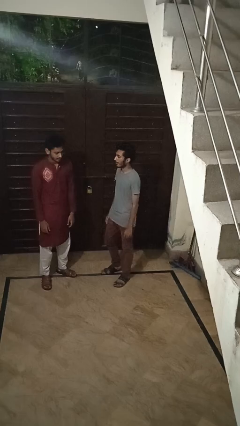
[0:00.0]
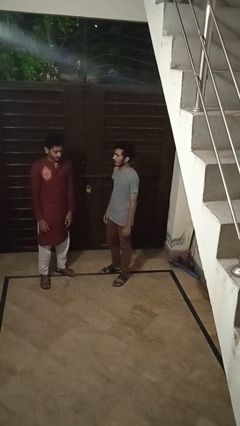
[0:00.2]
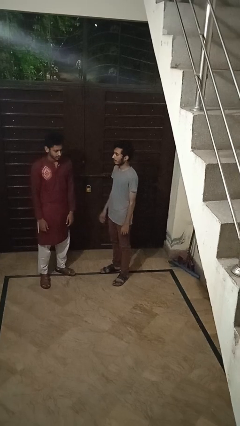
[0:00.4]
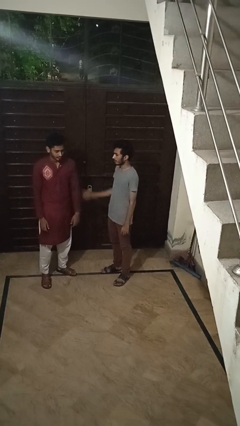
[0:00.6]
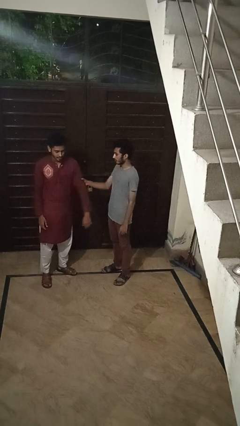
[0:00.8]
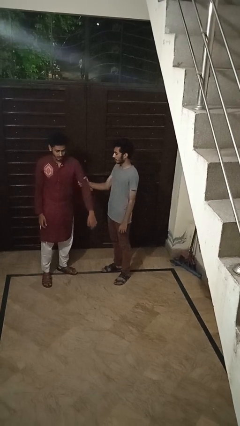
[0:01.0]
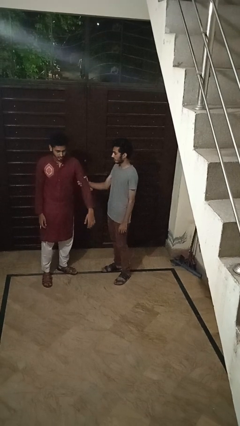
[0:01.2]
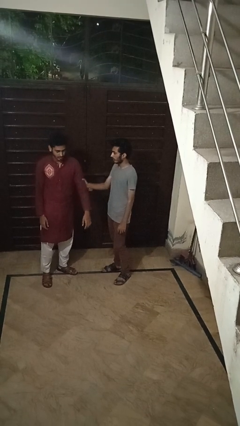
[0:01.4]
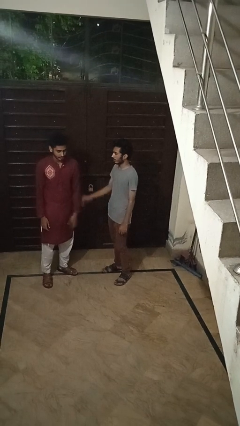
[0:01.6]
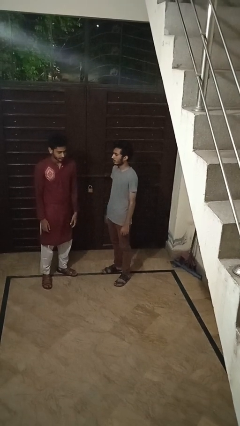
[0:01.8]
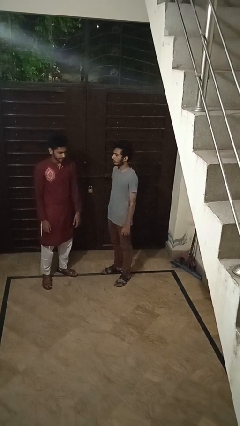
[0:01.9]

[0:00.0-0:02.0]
person grabs person by bicep

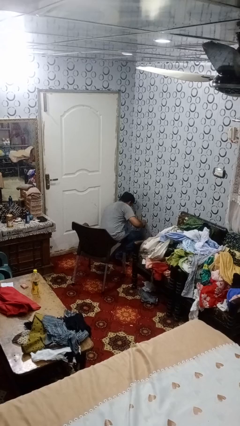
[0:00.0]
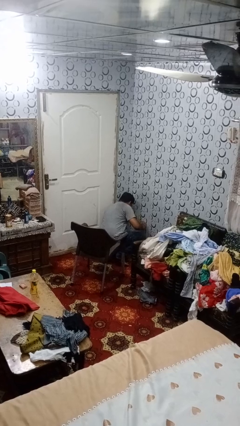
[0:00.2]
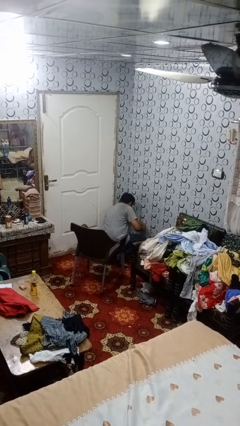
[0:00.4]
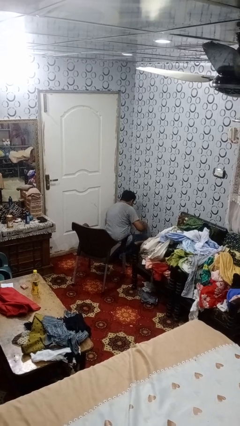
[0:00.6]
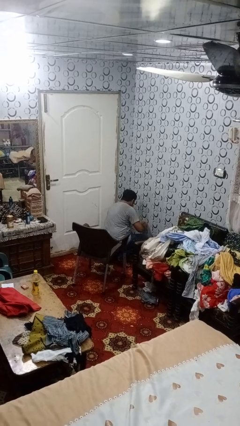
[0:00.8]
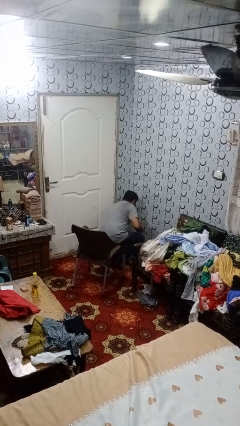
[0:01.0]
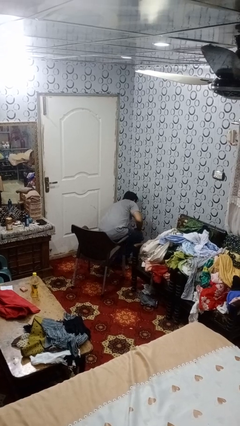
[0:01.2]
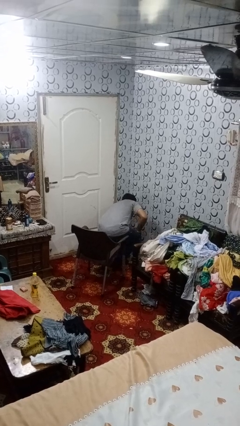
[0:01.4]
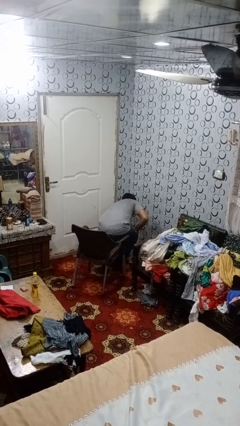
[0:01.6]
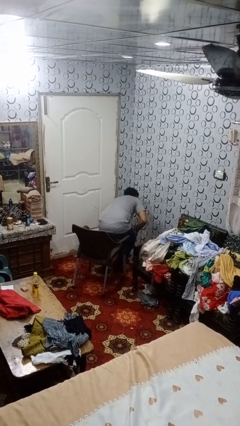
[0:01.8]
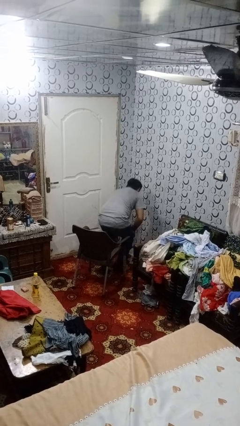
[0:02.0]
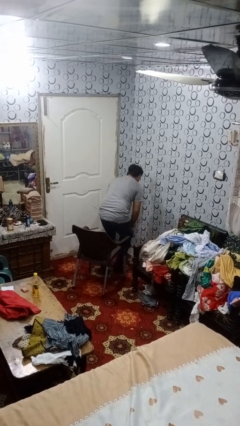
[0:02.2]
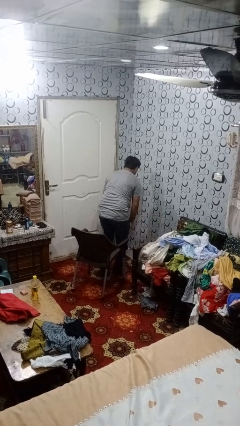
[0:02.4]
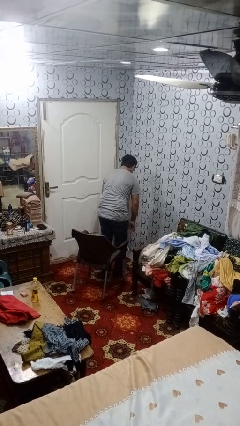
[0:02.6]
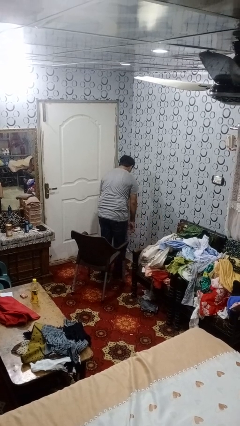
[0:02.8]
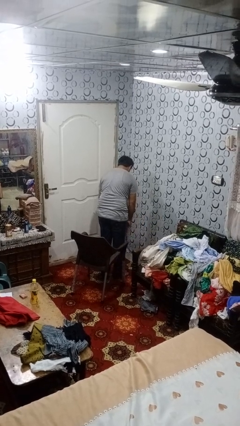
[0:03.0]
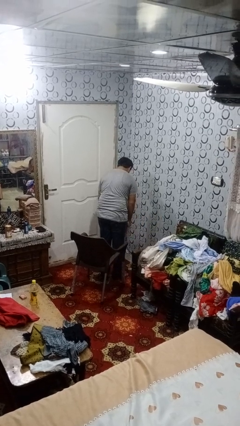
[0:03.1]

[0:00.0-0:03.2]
person stands up from floor

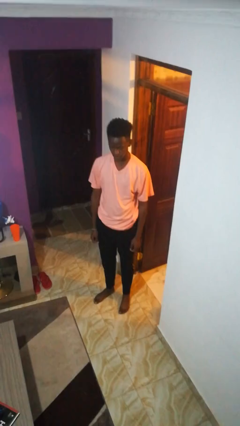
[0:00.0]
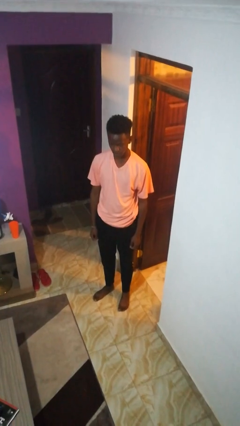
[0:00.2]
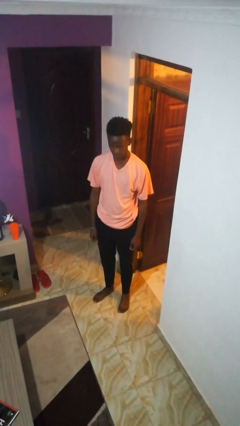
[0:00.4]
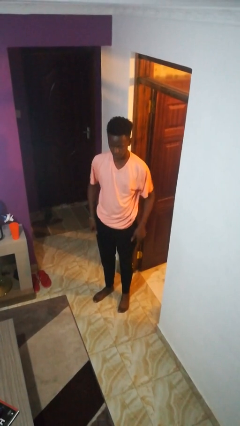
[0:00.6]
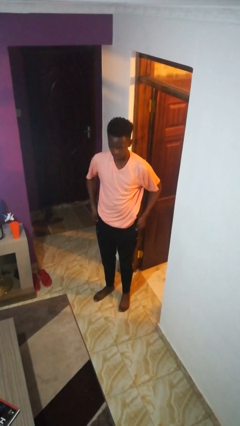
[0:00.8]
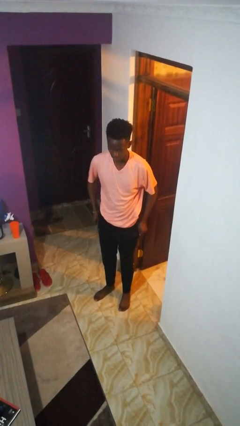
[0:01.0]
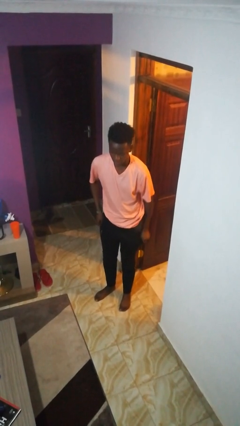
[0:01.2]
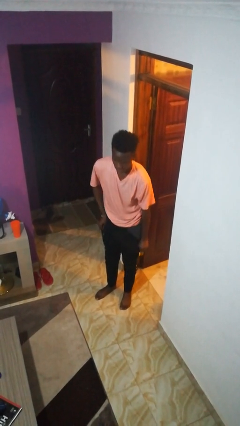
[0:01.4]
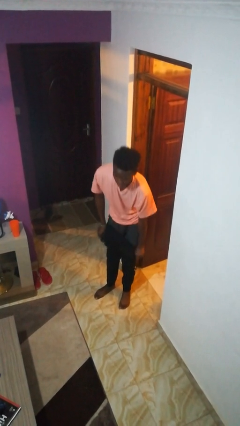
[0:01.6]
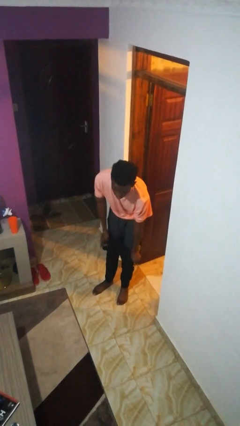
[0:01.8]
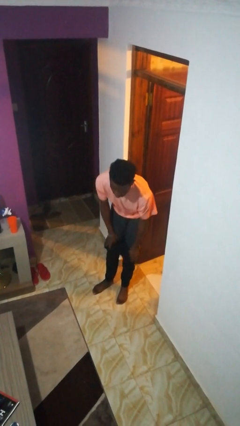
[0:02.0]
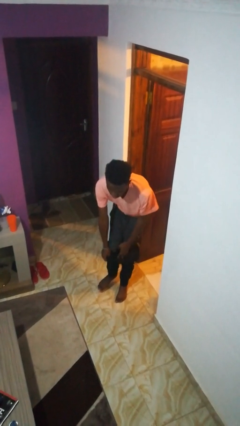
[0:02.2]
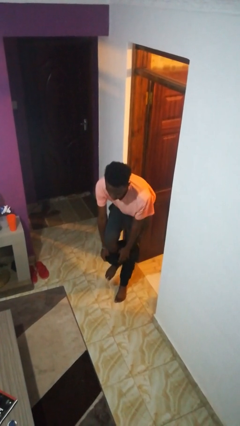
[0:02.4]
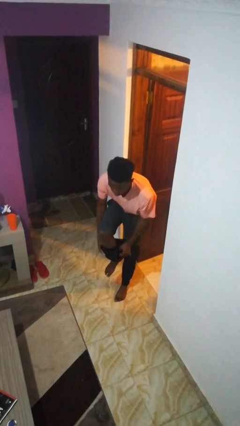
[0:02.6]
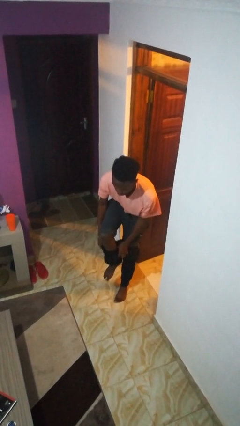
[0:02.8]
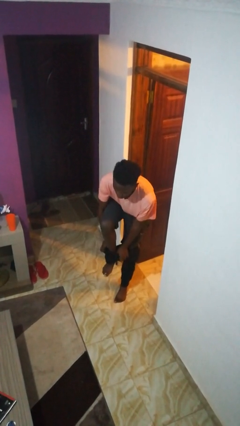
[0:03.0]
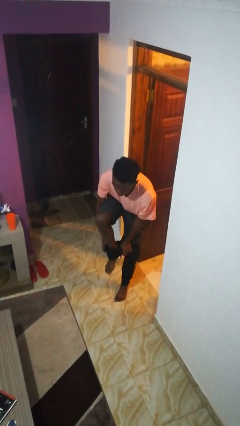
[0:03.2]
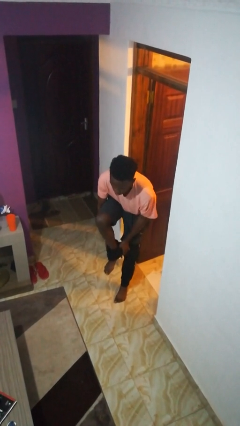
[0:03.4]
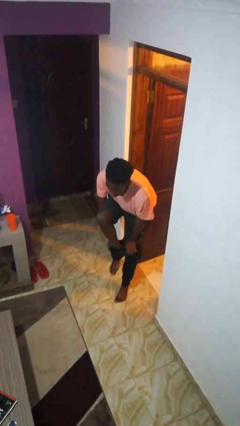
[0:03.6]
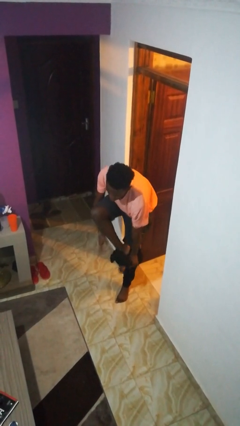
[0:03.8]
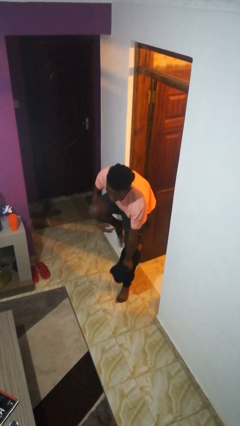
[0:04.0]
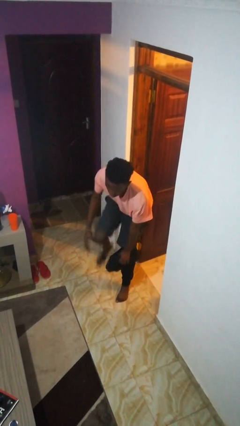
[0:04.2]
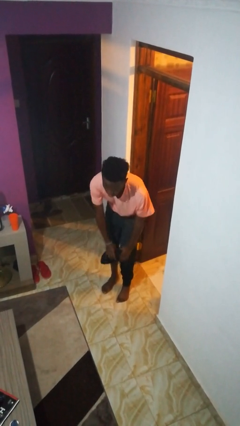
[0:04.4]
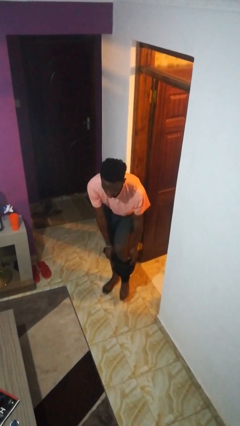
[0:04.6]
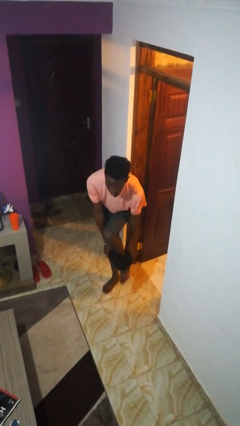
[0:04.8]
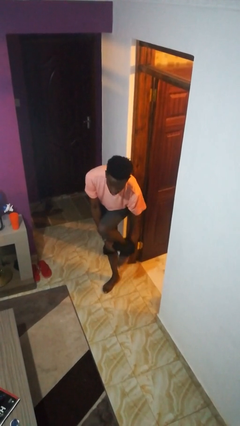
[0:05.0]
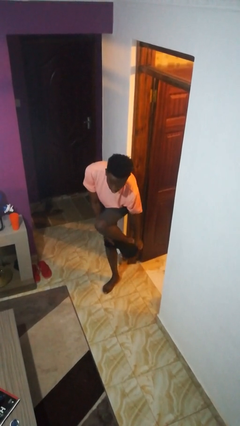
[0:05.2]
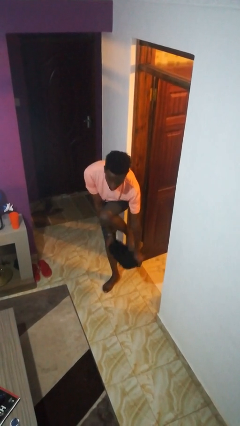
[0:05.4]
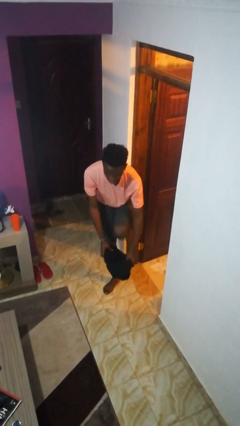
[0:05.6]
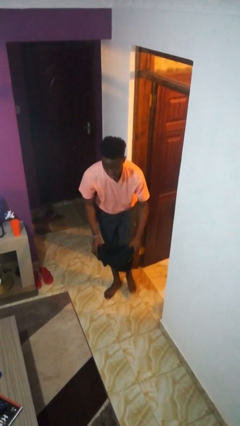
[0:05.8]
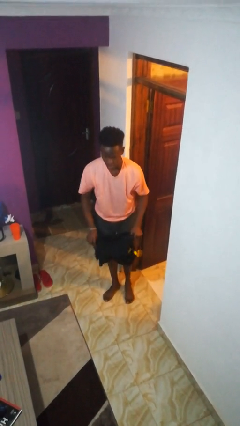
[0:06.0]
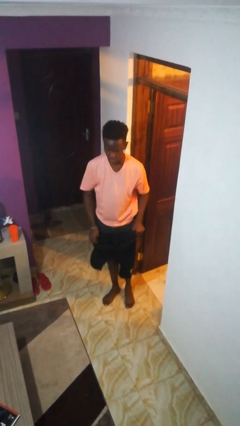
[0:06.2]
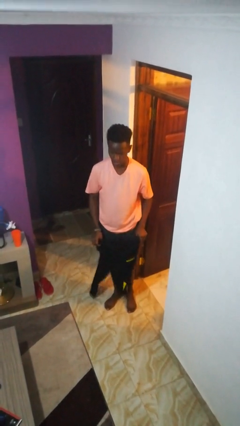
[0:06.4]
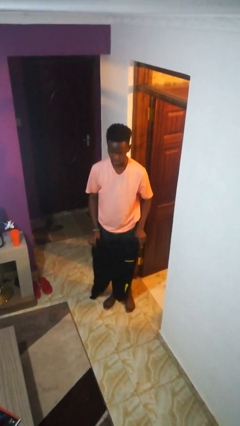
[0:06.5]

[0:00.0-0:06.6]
person takes off pants

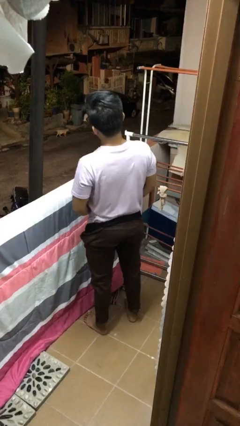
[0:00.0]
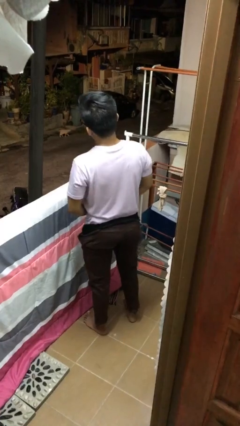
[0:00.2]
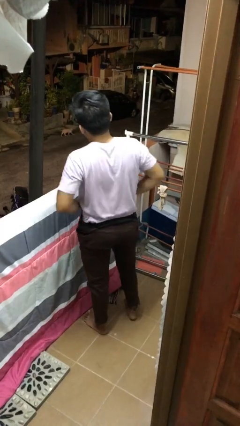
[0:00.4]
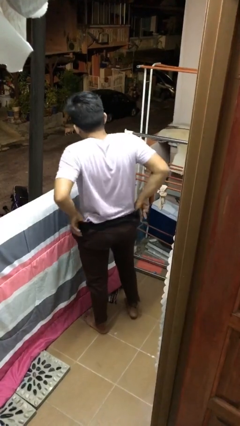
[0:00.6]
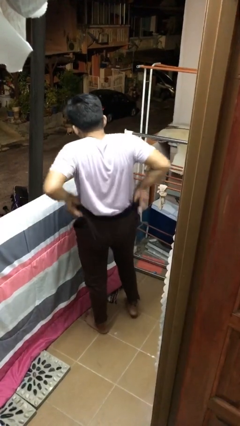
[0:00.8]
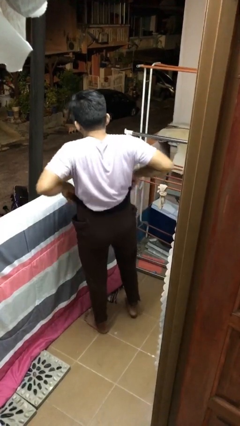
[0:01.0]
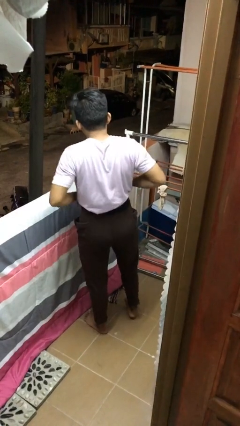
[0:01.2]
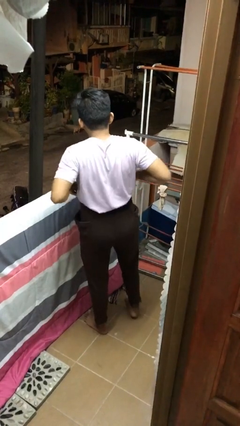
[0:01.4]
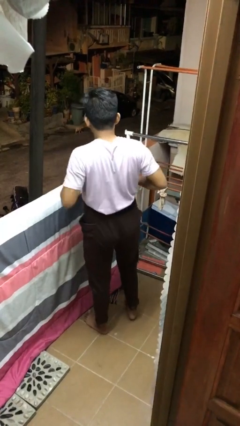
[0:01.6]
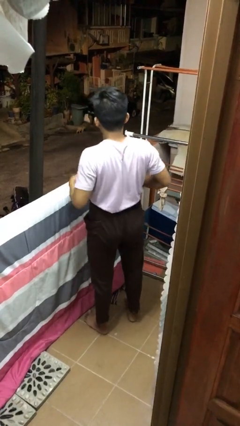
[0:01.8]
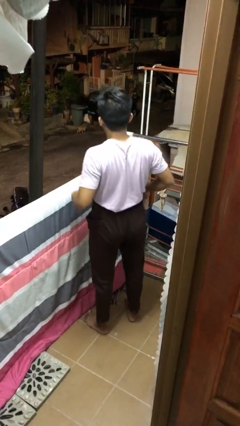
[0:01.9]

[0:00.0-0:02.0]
person hikes up pants

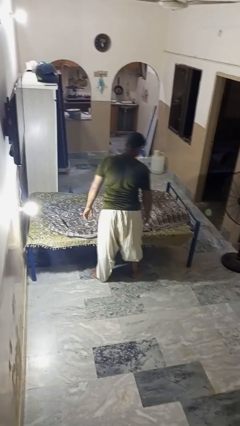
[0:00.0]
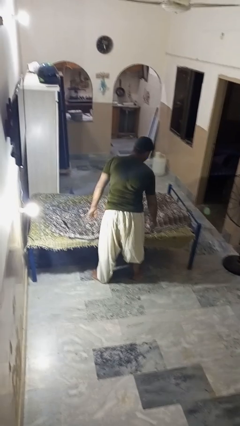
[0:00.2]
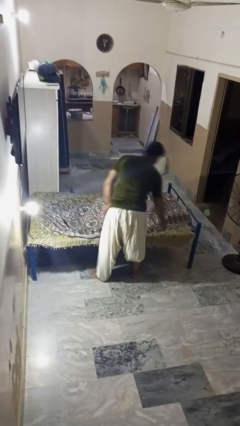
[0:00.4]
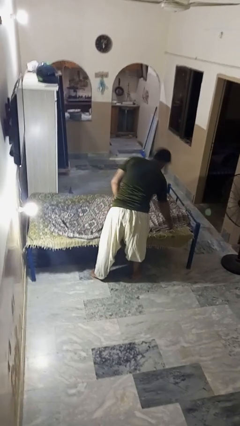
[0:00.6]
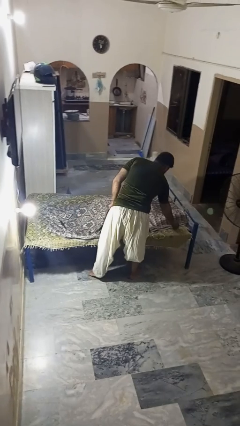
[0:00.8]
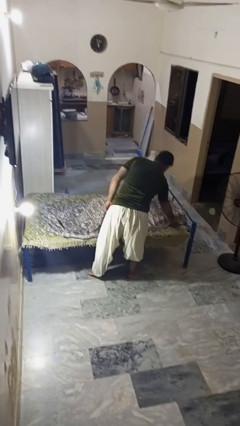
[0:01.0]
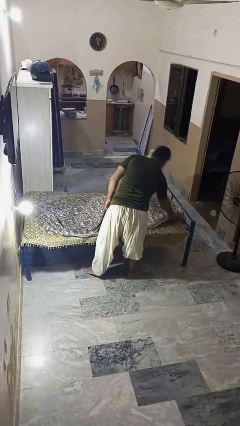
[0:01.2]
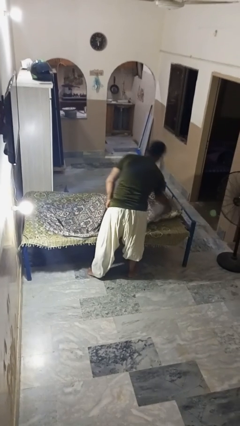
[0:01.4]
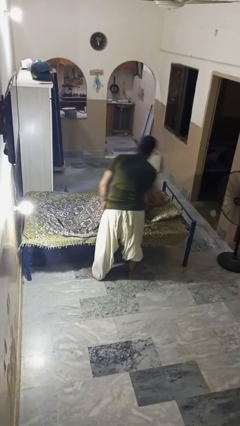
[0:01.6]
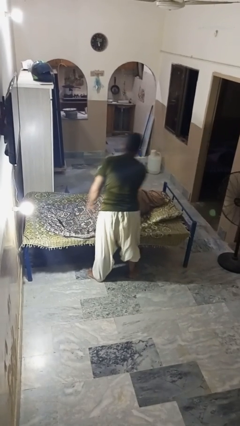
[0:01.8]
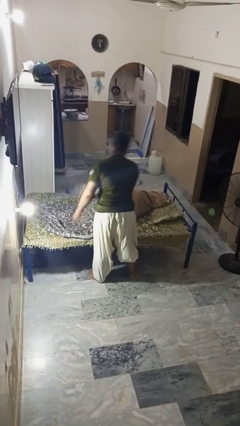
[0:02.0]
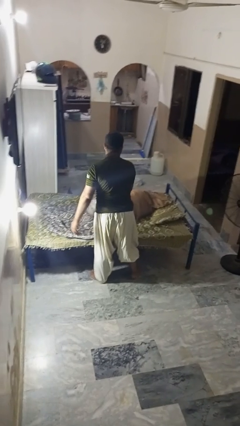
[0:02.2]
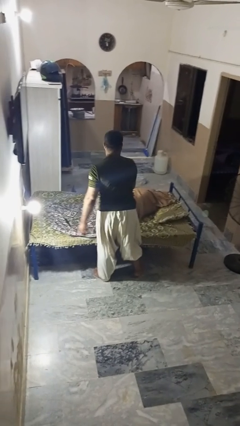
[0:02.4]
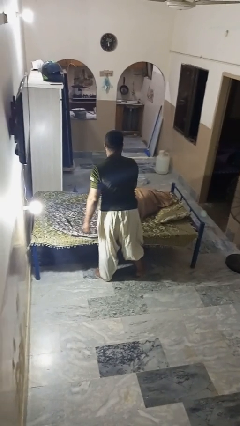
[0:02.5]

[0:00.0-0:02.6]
person uncovers friend with blanket

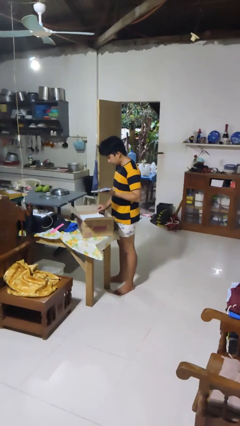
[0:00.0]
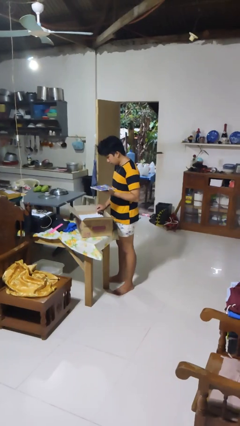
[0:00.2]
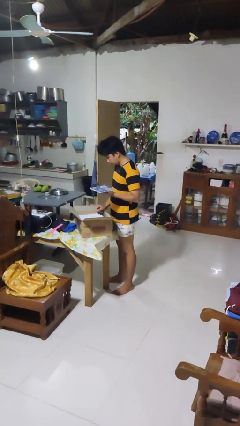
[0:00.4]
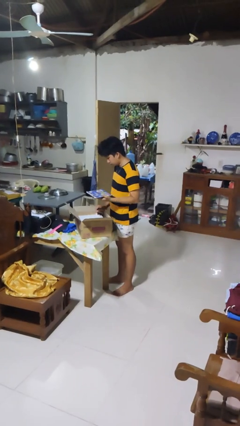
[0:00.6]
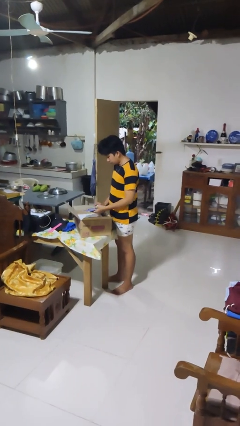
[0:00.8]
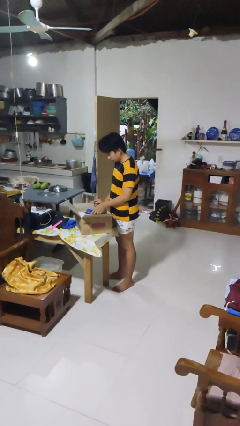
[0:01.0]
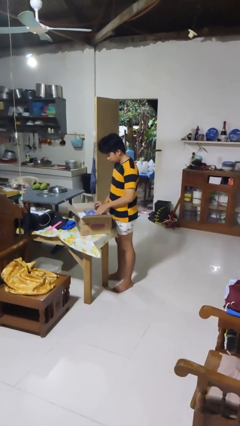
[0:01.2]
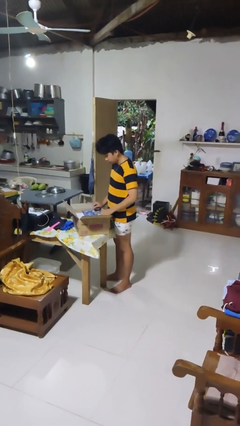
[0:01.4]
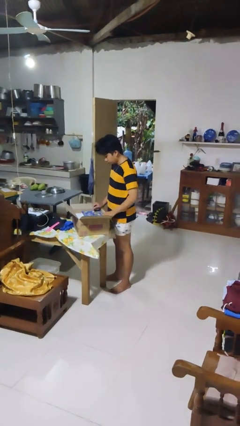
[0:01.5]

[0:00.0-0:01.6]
person puts object into box
